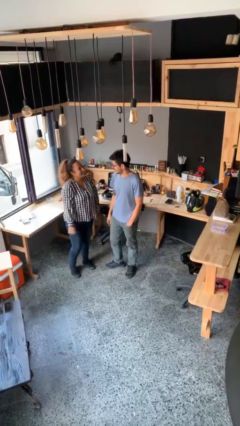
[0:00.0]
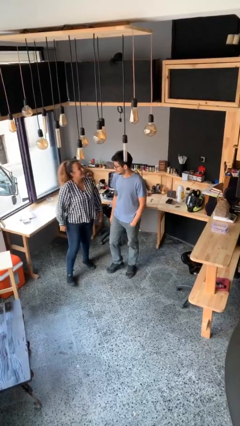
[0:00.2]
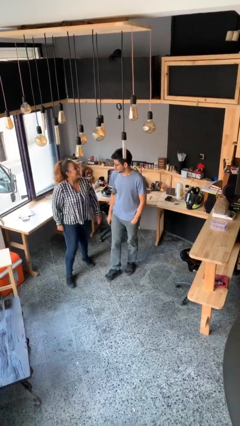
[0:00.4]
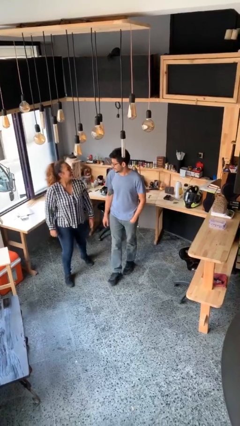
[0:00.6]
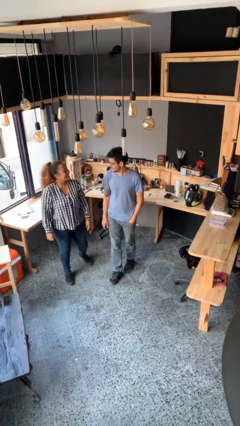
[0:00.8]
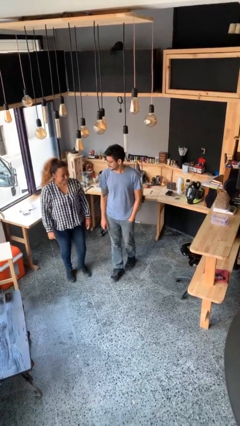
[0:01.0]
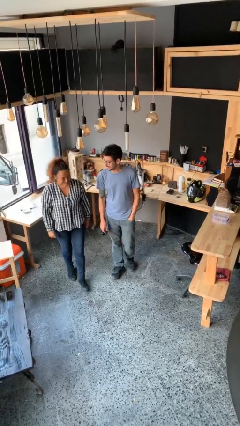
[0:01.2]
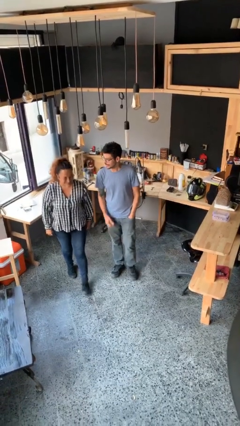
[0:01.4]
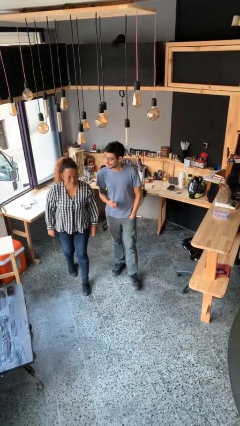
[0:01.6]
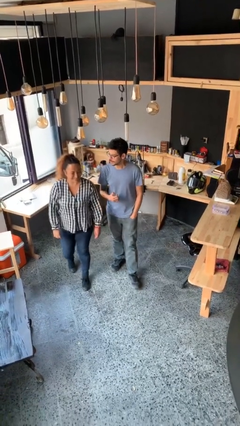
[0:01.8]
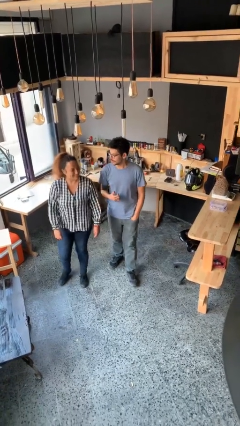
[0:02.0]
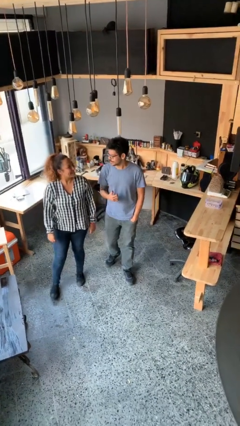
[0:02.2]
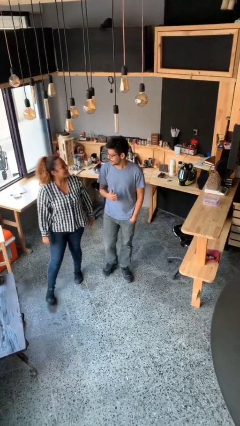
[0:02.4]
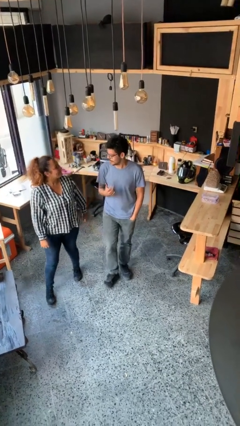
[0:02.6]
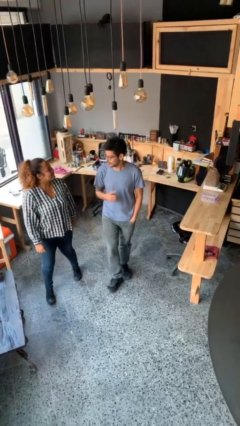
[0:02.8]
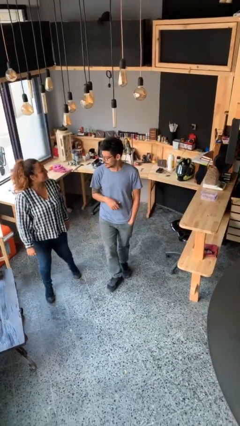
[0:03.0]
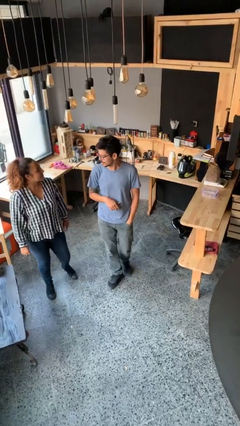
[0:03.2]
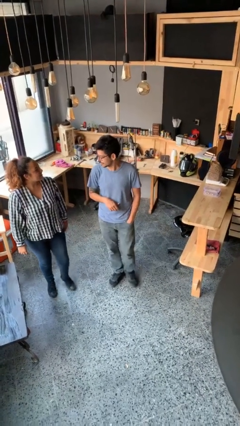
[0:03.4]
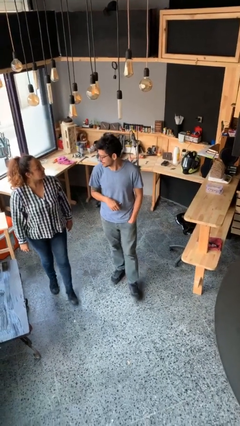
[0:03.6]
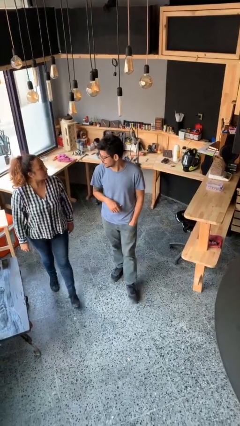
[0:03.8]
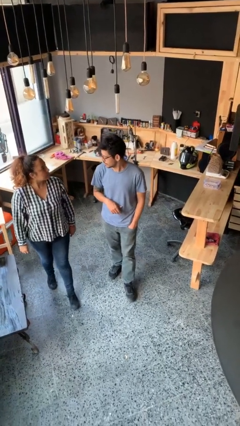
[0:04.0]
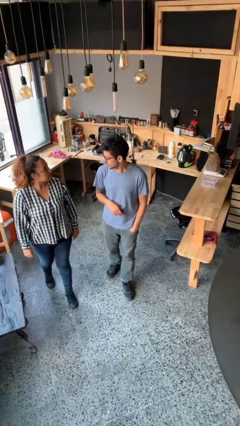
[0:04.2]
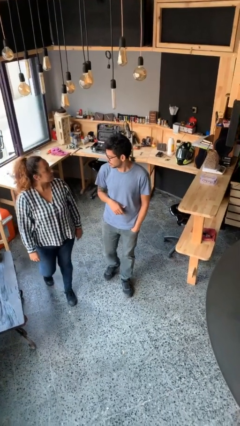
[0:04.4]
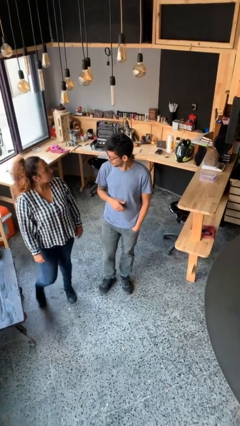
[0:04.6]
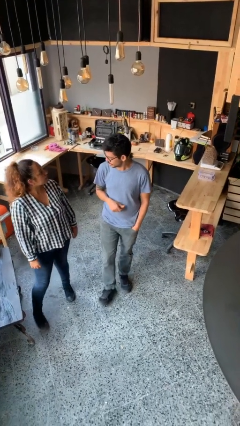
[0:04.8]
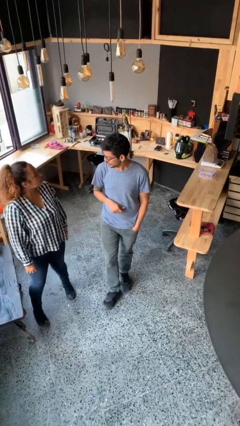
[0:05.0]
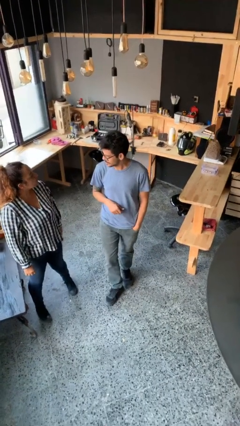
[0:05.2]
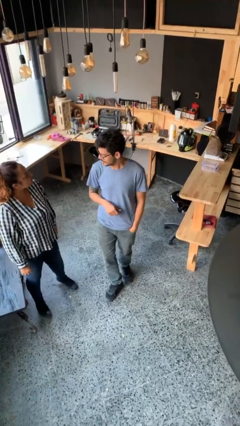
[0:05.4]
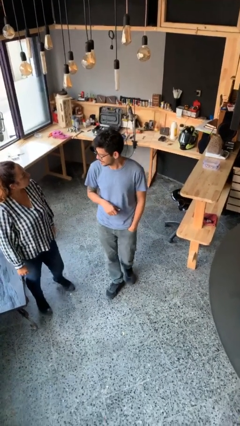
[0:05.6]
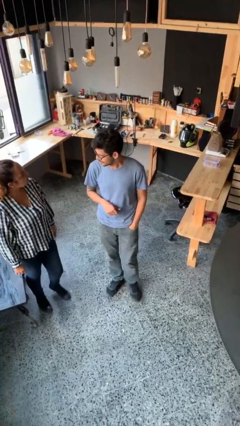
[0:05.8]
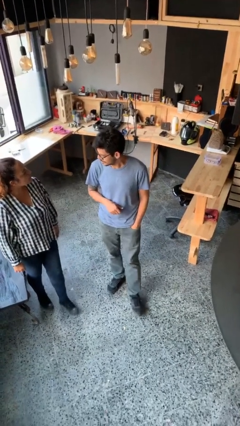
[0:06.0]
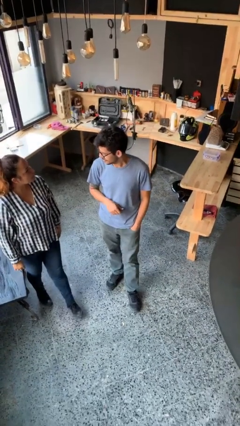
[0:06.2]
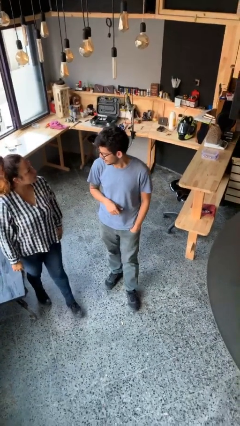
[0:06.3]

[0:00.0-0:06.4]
person talks to person

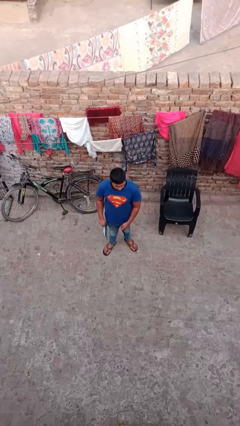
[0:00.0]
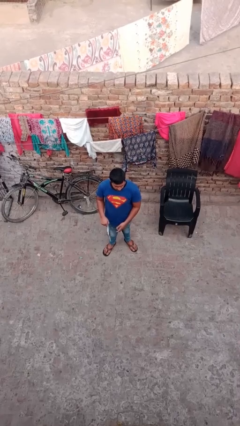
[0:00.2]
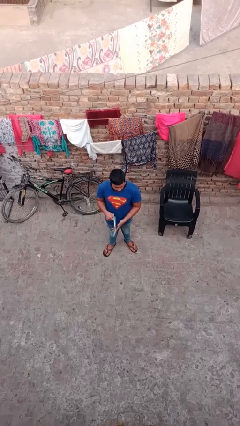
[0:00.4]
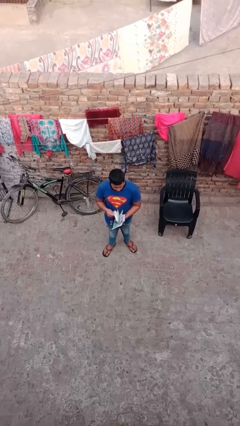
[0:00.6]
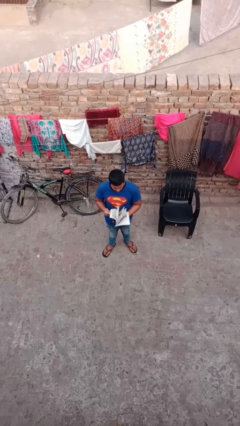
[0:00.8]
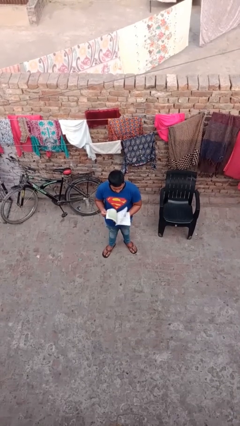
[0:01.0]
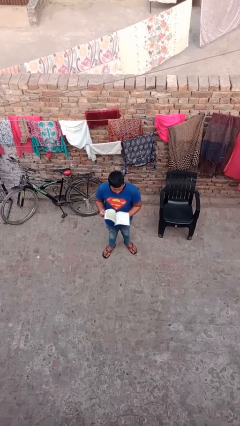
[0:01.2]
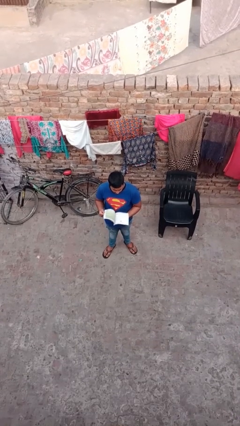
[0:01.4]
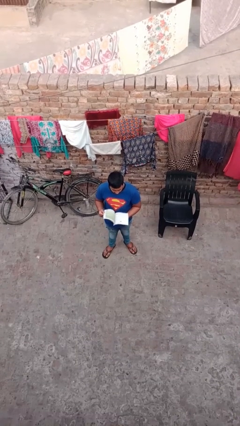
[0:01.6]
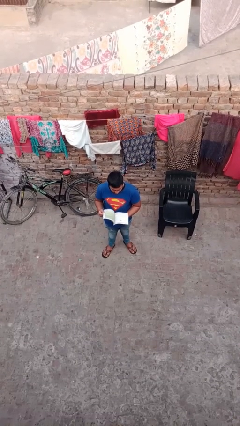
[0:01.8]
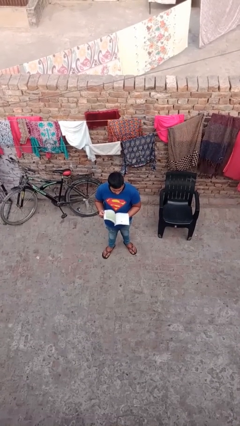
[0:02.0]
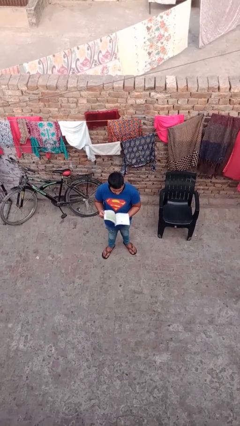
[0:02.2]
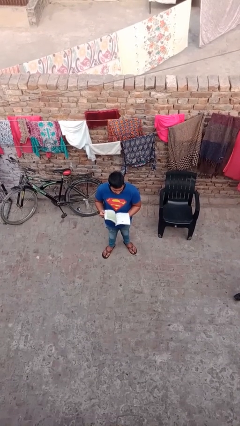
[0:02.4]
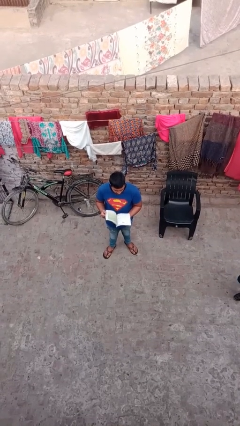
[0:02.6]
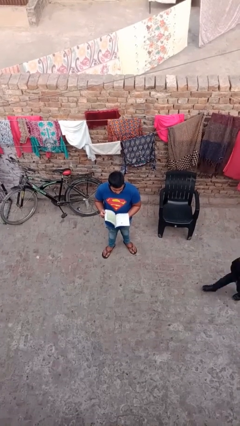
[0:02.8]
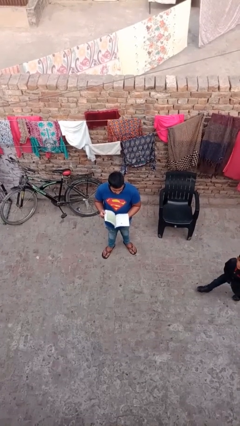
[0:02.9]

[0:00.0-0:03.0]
person reads document

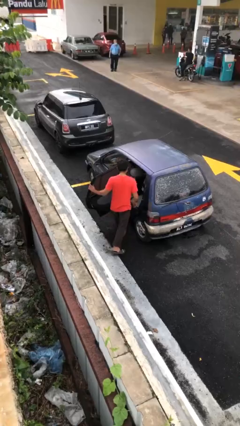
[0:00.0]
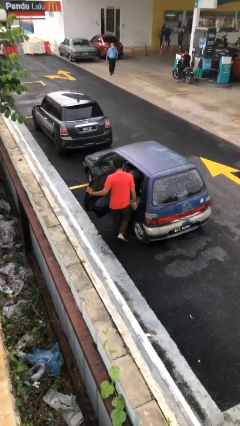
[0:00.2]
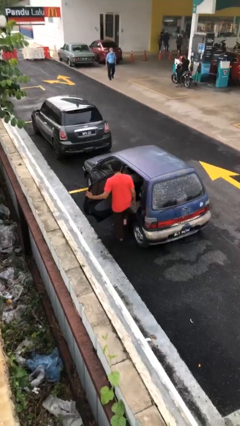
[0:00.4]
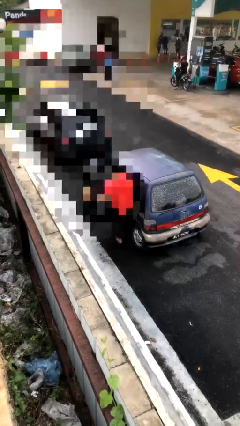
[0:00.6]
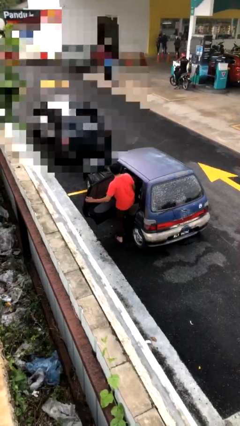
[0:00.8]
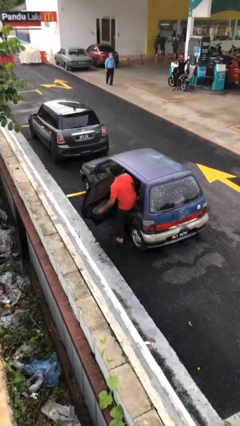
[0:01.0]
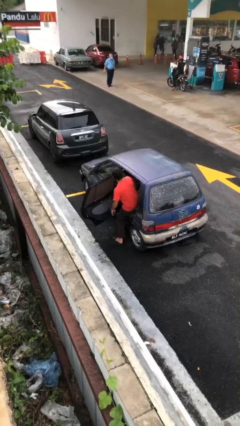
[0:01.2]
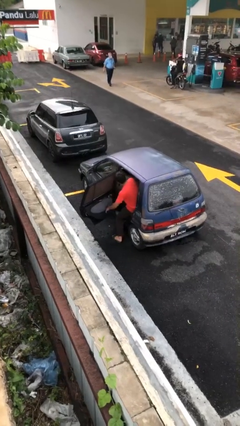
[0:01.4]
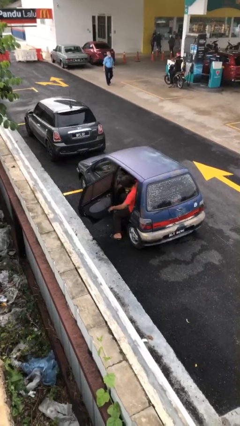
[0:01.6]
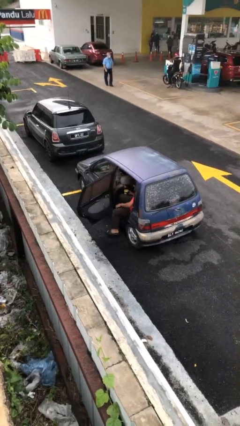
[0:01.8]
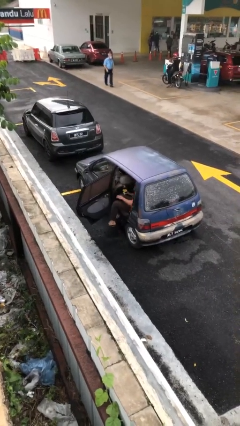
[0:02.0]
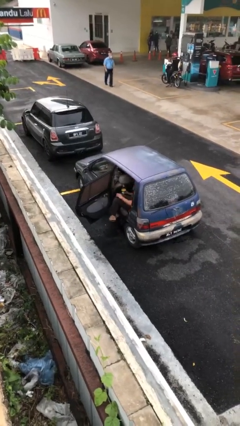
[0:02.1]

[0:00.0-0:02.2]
person enters car

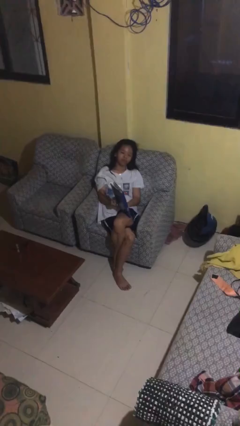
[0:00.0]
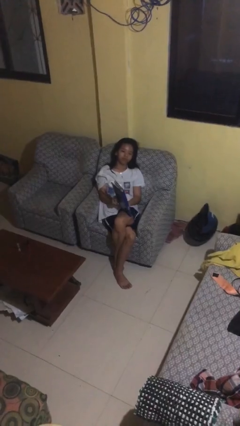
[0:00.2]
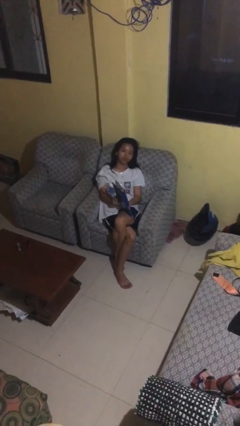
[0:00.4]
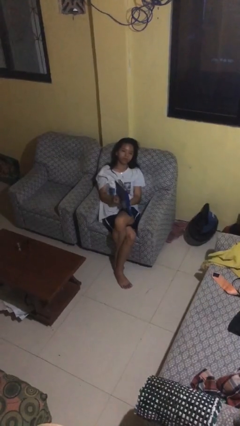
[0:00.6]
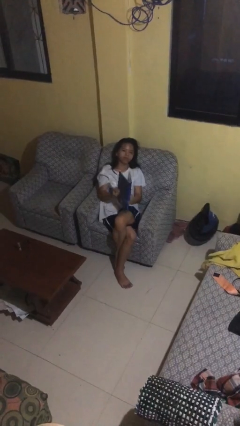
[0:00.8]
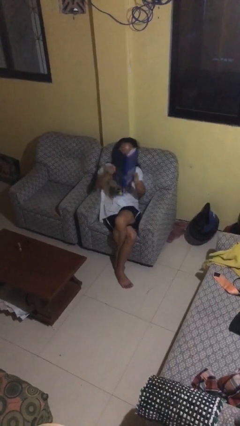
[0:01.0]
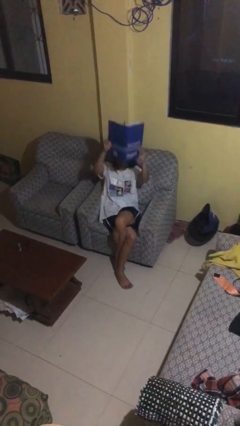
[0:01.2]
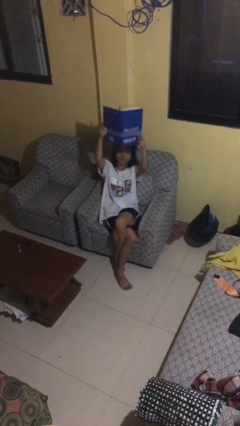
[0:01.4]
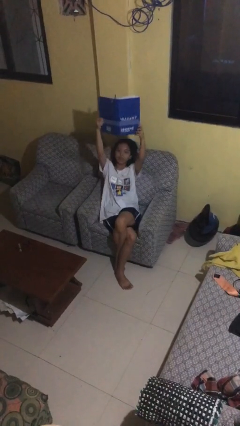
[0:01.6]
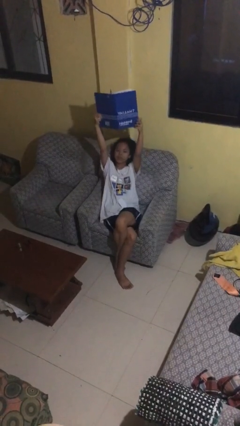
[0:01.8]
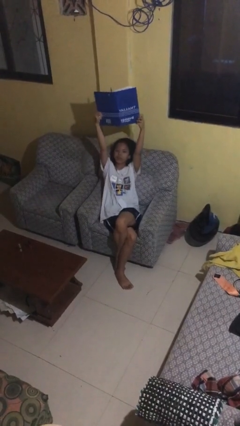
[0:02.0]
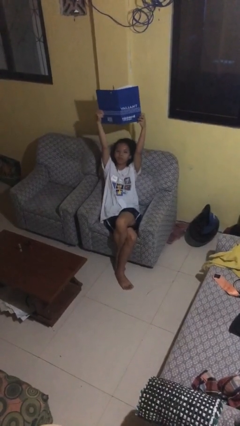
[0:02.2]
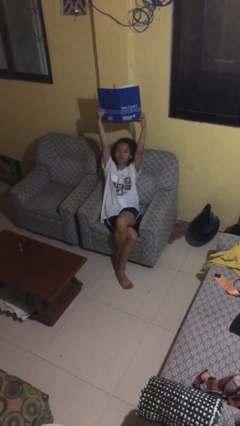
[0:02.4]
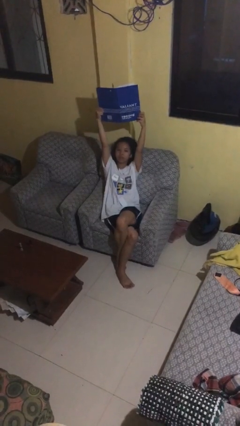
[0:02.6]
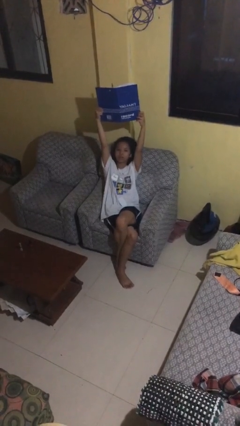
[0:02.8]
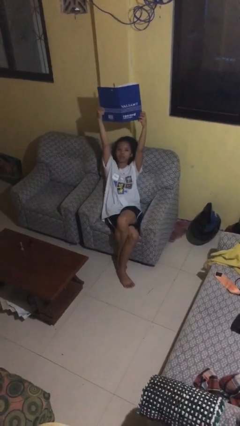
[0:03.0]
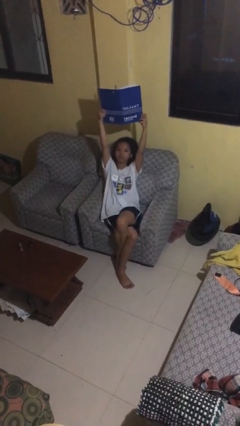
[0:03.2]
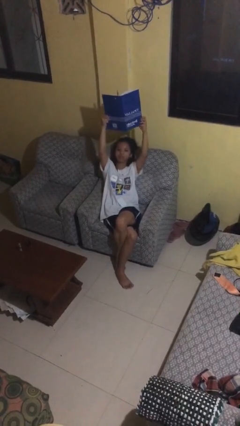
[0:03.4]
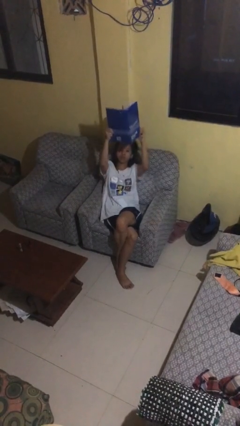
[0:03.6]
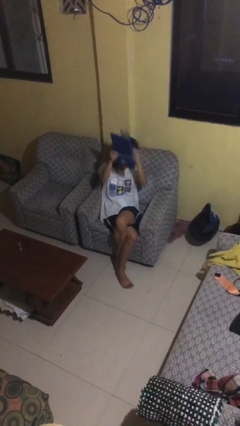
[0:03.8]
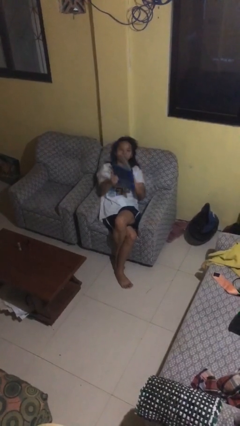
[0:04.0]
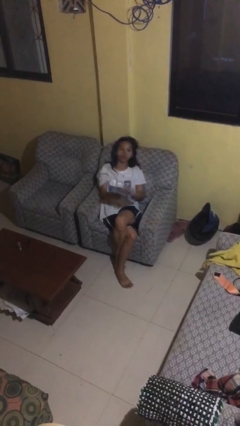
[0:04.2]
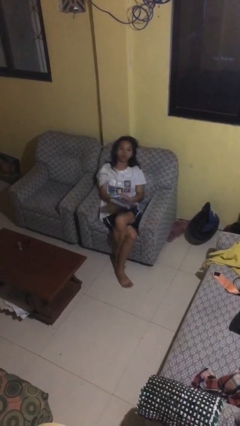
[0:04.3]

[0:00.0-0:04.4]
person holds object above head

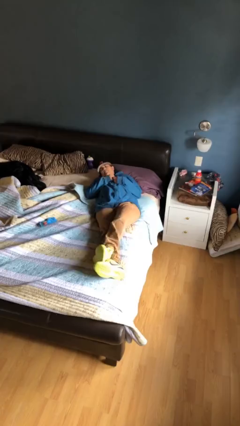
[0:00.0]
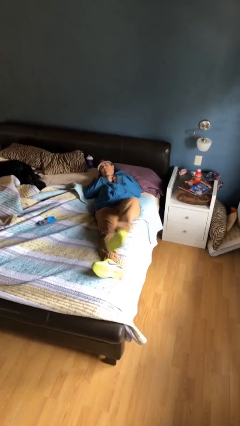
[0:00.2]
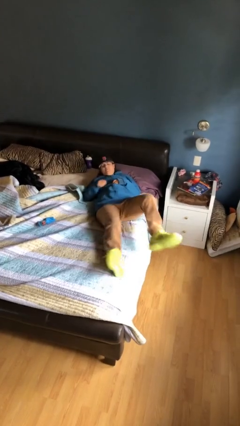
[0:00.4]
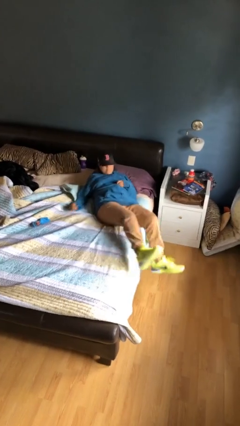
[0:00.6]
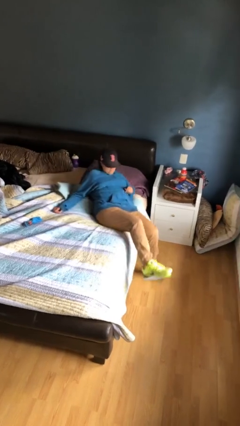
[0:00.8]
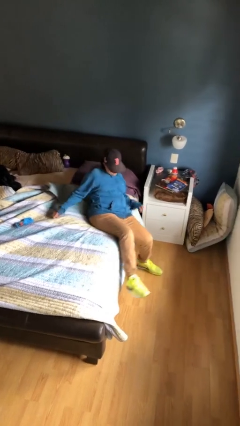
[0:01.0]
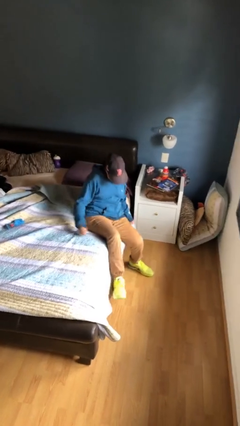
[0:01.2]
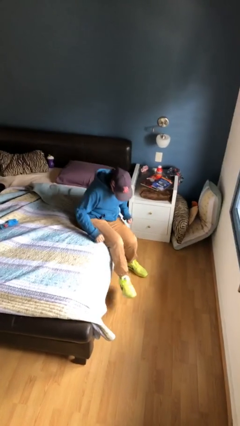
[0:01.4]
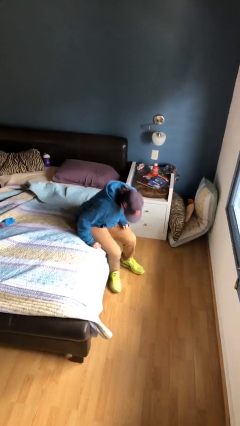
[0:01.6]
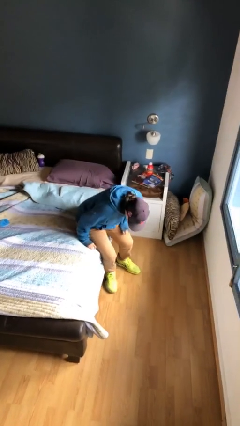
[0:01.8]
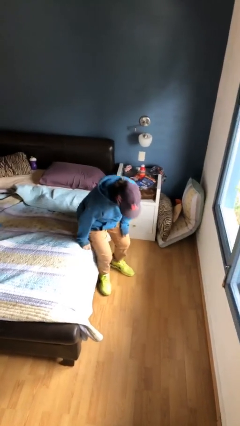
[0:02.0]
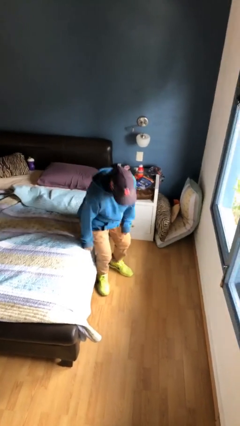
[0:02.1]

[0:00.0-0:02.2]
person stands up
